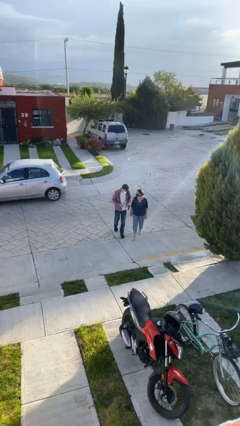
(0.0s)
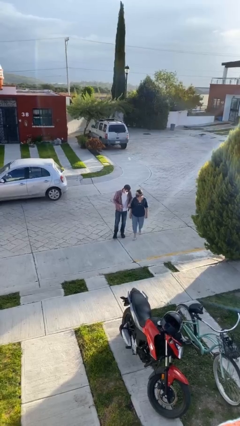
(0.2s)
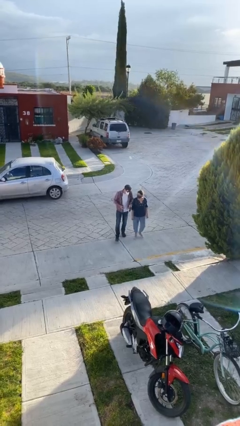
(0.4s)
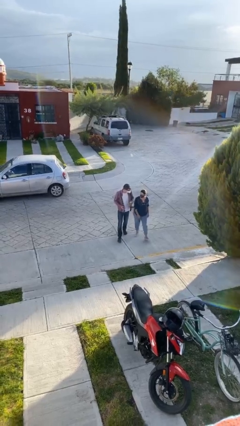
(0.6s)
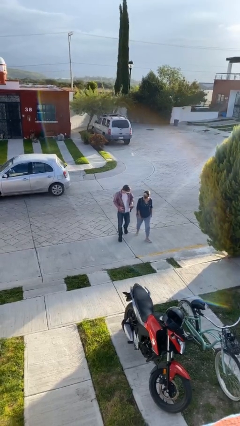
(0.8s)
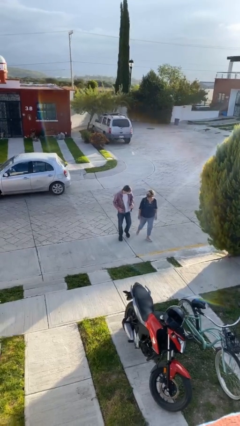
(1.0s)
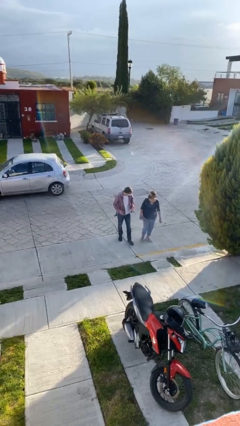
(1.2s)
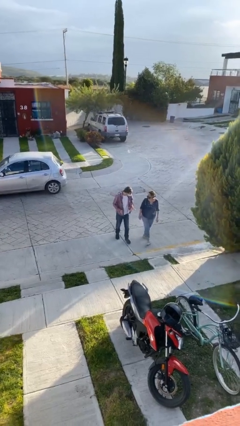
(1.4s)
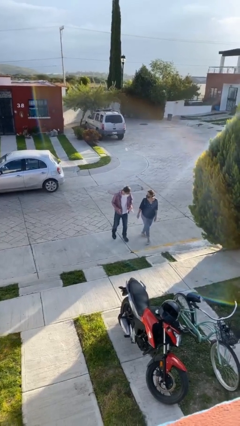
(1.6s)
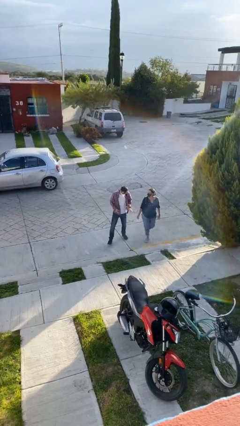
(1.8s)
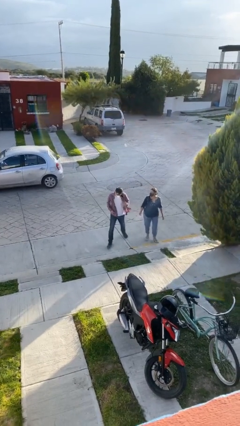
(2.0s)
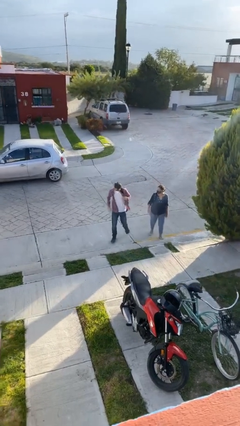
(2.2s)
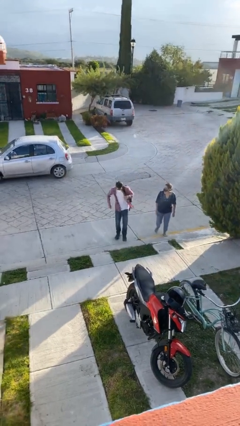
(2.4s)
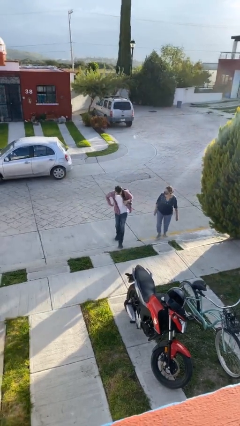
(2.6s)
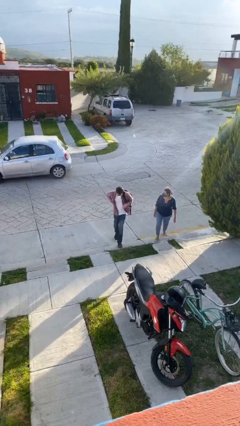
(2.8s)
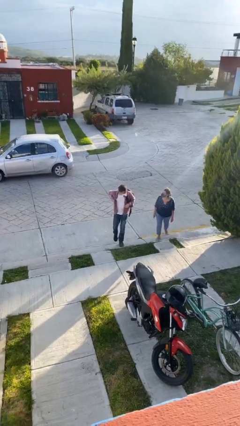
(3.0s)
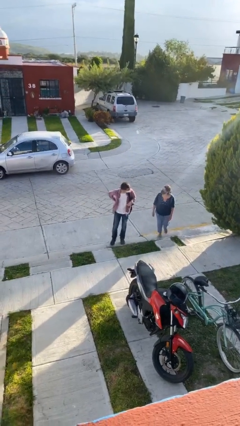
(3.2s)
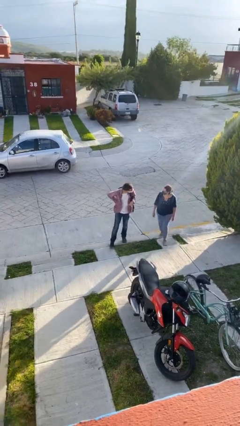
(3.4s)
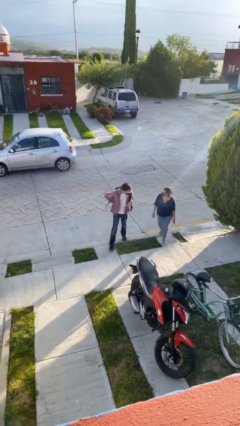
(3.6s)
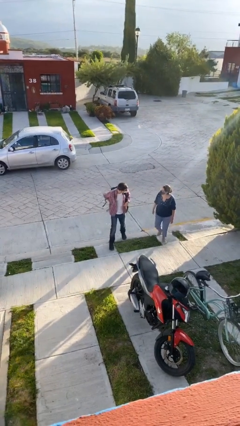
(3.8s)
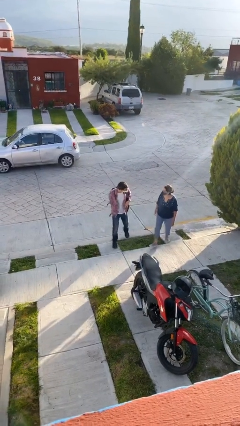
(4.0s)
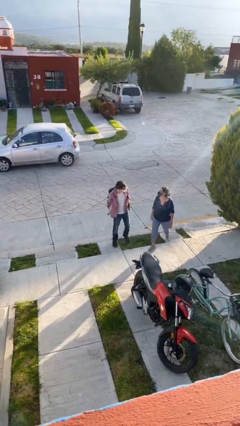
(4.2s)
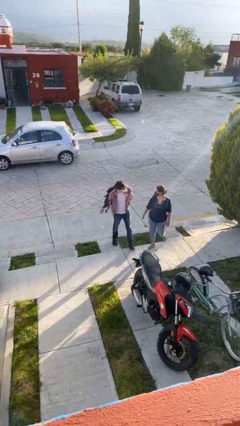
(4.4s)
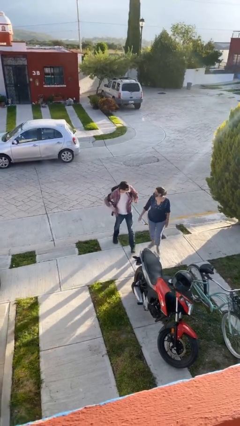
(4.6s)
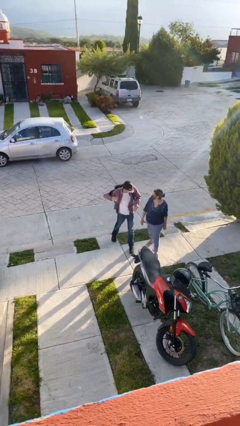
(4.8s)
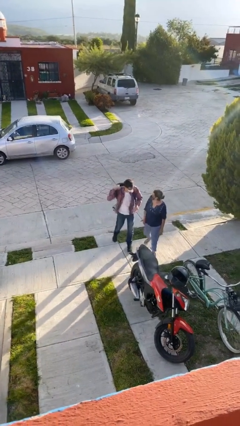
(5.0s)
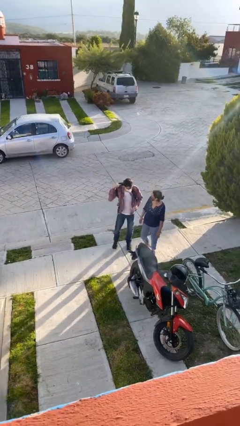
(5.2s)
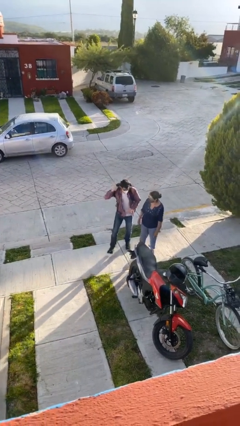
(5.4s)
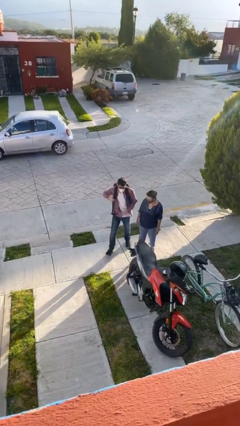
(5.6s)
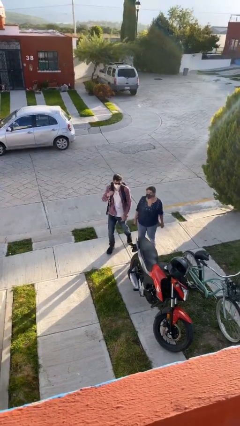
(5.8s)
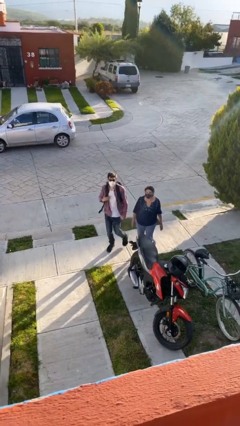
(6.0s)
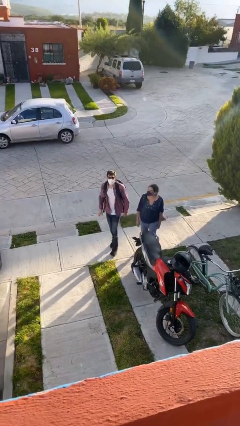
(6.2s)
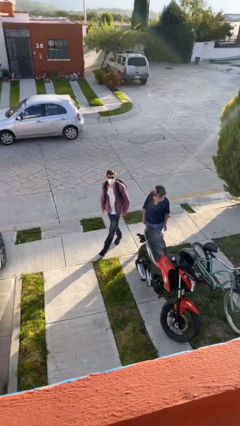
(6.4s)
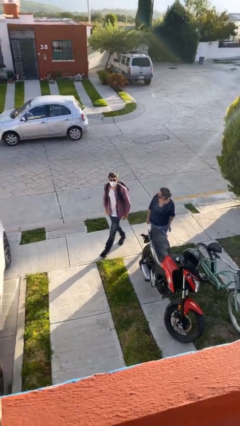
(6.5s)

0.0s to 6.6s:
person talks to person

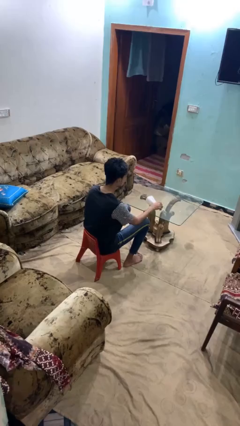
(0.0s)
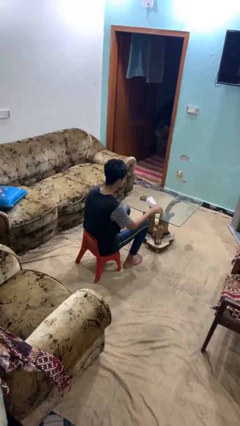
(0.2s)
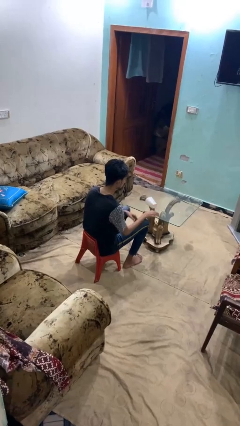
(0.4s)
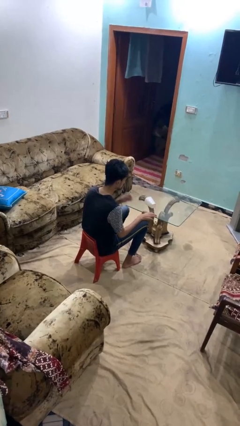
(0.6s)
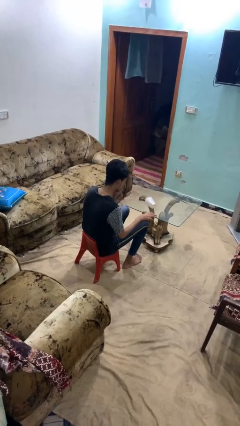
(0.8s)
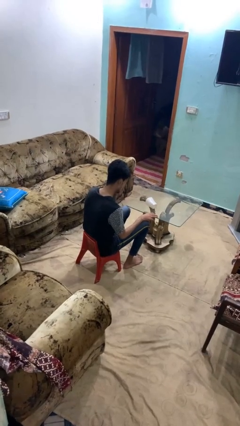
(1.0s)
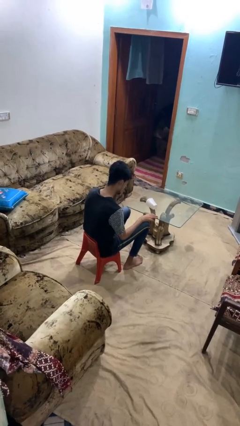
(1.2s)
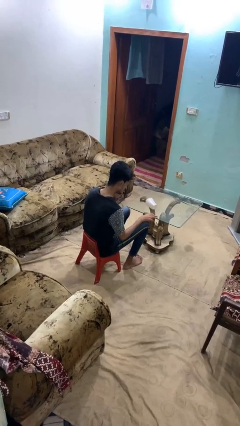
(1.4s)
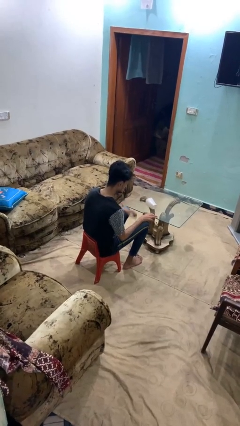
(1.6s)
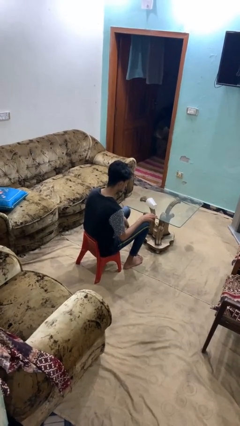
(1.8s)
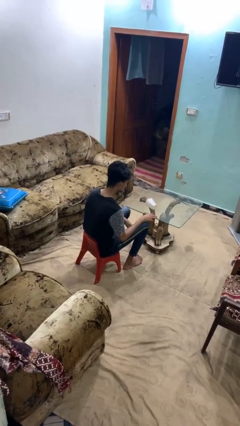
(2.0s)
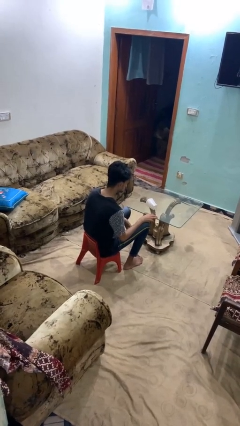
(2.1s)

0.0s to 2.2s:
person knocks over glass

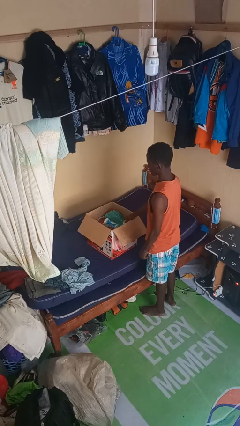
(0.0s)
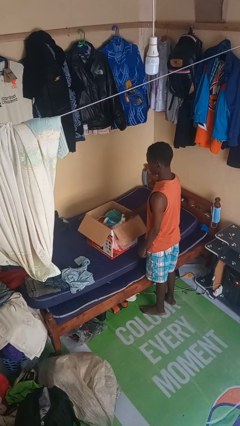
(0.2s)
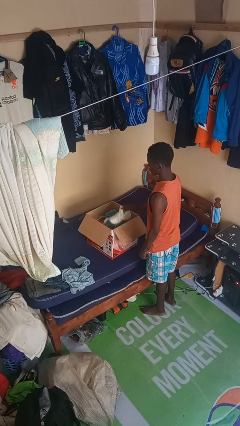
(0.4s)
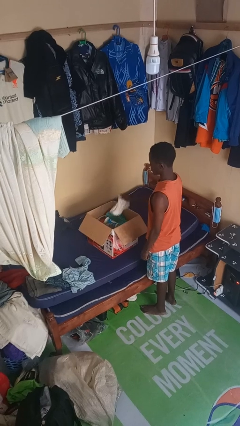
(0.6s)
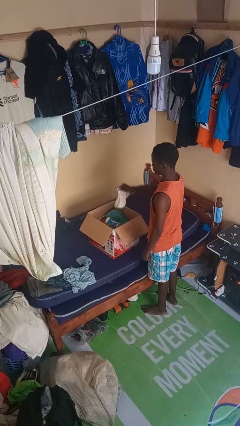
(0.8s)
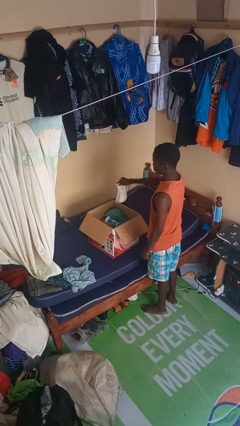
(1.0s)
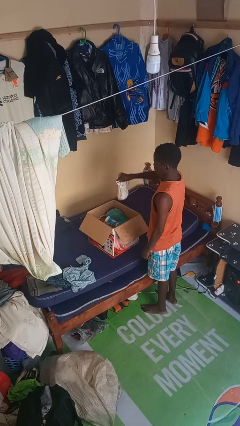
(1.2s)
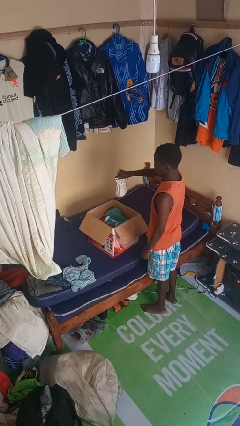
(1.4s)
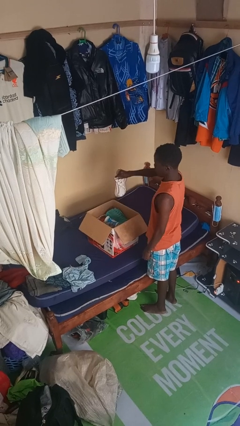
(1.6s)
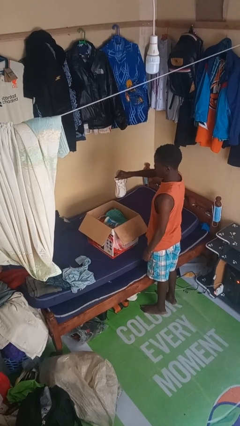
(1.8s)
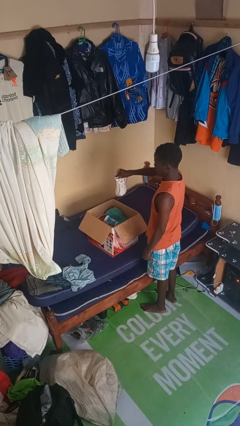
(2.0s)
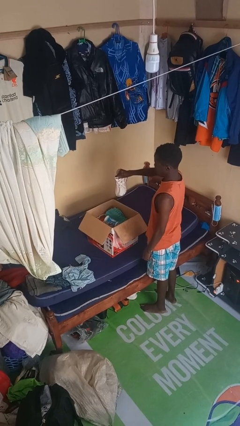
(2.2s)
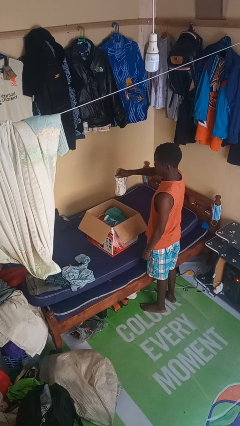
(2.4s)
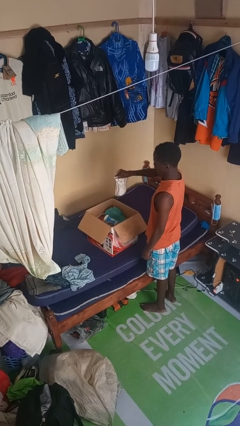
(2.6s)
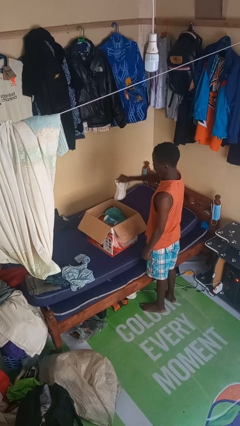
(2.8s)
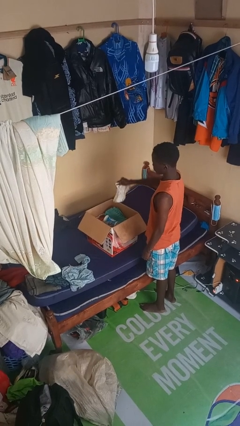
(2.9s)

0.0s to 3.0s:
person takes object from box

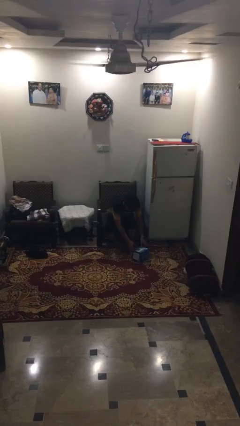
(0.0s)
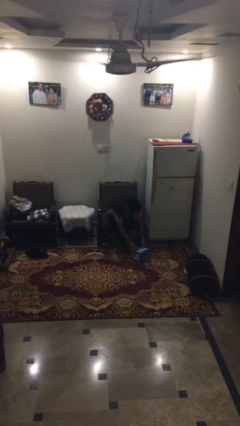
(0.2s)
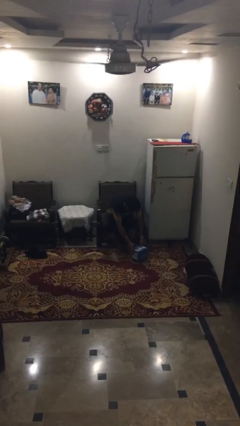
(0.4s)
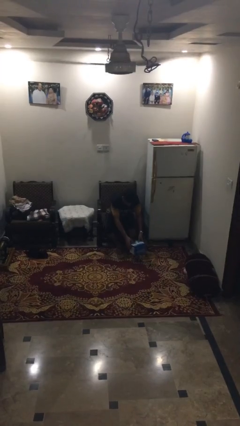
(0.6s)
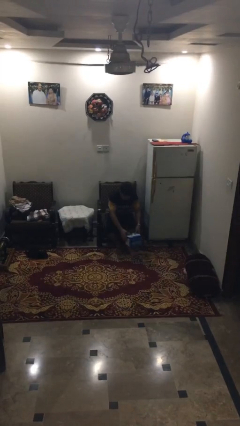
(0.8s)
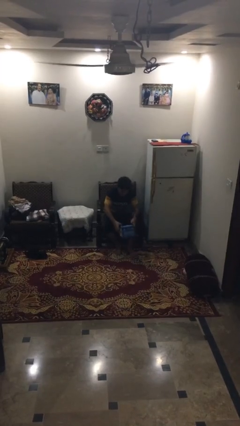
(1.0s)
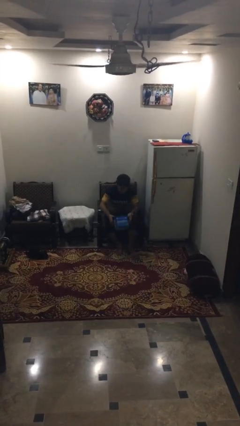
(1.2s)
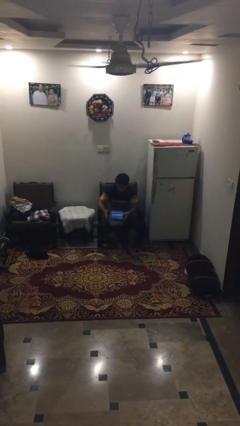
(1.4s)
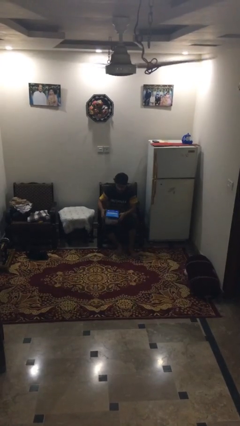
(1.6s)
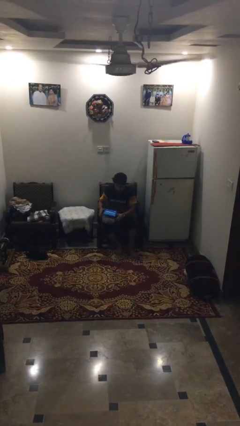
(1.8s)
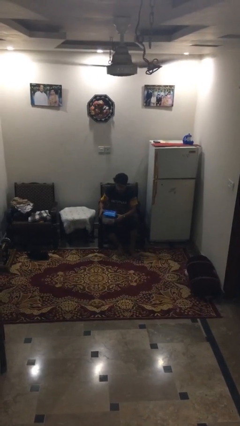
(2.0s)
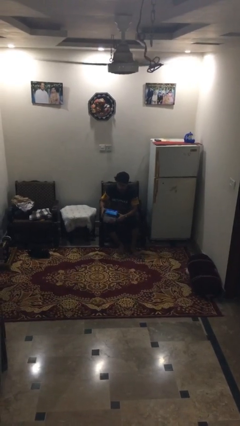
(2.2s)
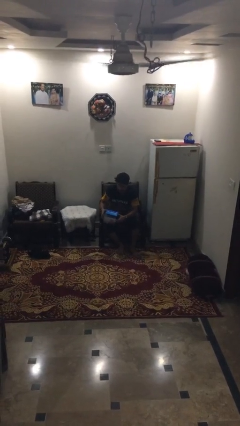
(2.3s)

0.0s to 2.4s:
person picks up object from floor

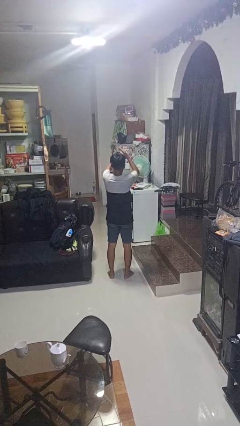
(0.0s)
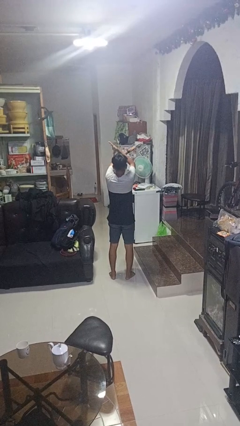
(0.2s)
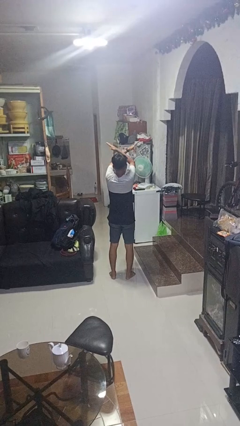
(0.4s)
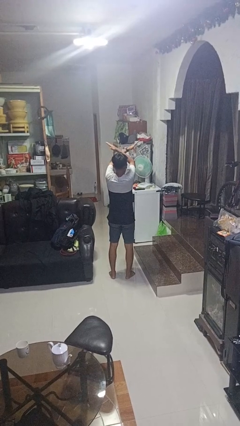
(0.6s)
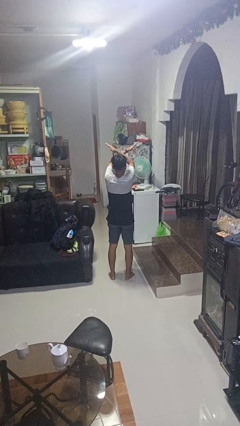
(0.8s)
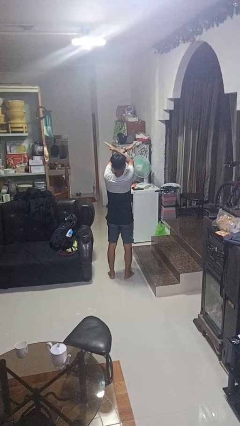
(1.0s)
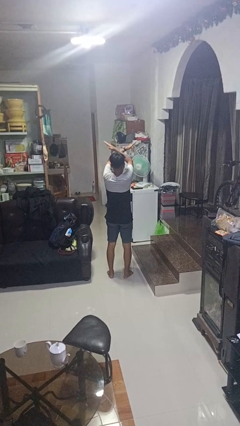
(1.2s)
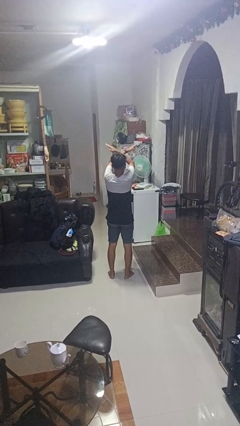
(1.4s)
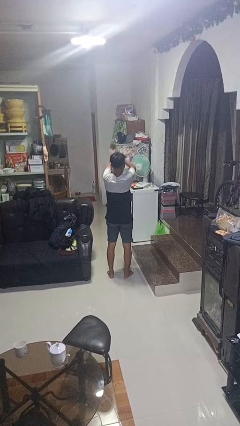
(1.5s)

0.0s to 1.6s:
person gestures arms x

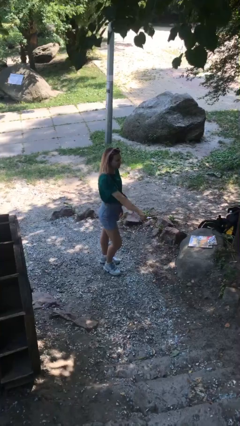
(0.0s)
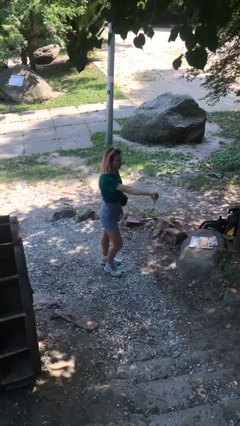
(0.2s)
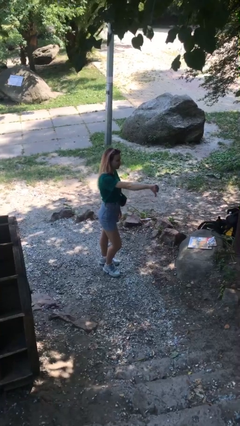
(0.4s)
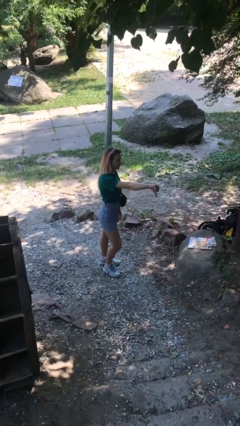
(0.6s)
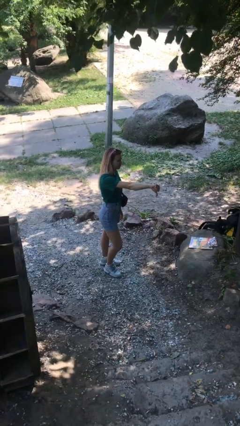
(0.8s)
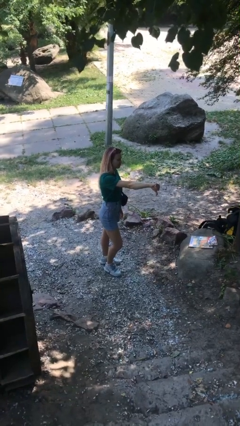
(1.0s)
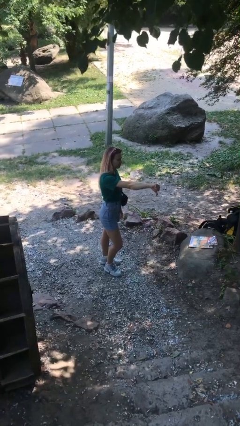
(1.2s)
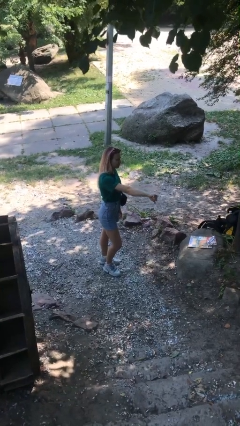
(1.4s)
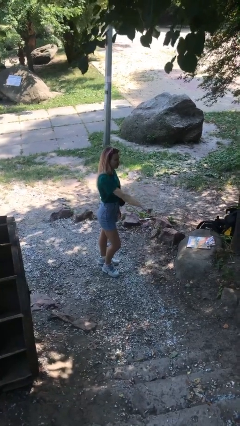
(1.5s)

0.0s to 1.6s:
person gestures thumbs down

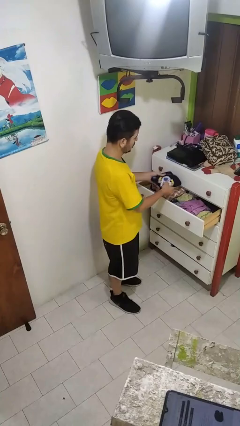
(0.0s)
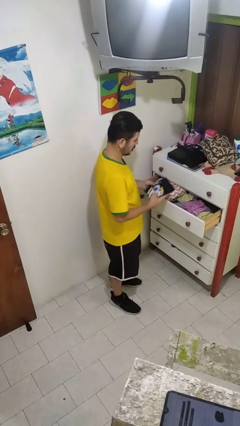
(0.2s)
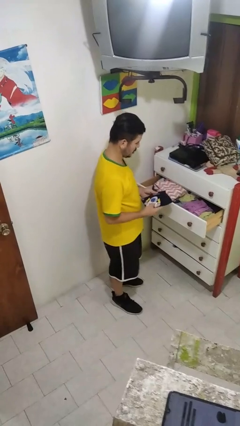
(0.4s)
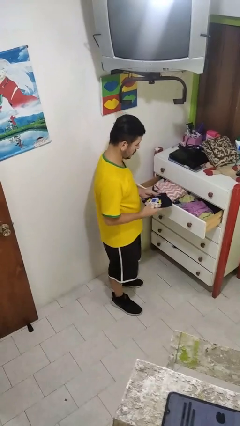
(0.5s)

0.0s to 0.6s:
person takes clothes from dresser
